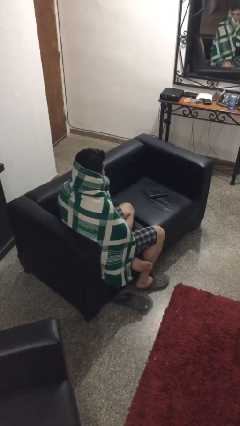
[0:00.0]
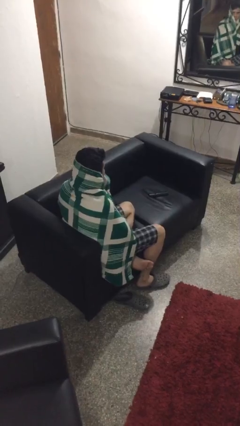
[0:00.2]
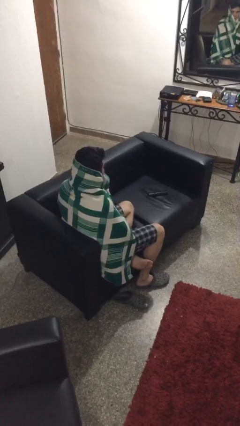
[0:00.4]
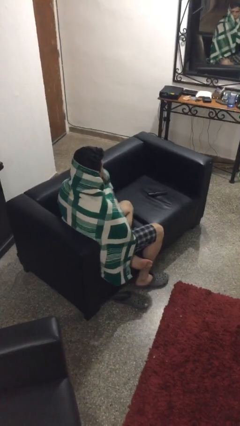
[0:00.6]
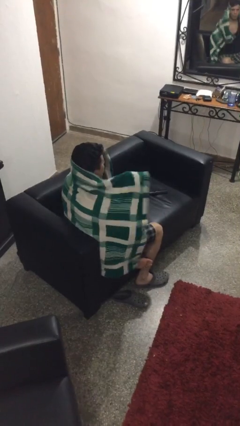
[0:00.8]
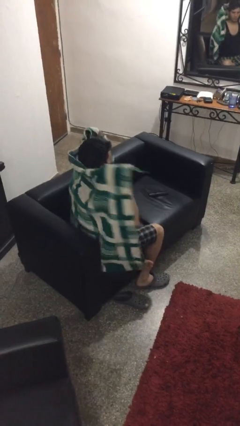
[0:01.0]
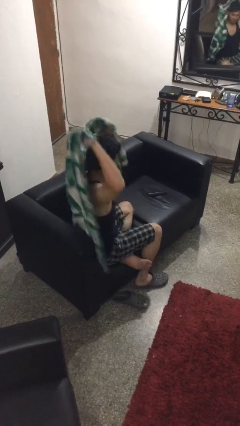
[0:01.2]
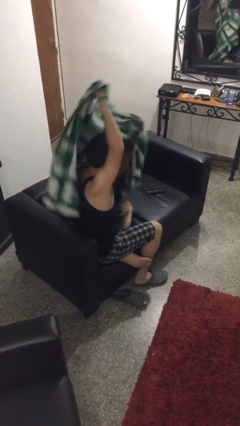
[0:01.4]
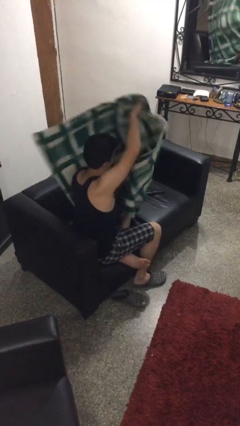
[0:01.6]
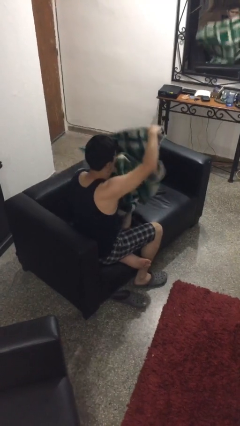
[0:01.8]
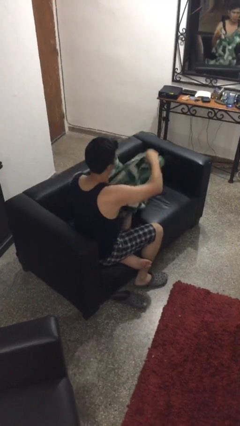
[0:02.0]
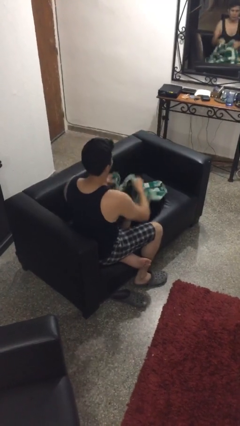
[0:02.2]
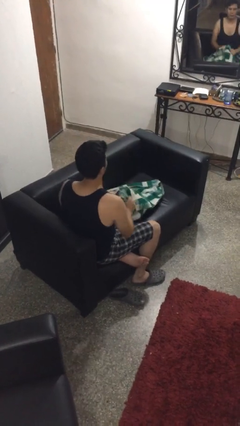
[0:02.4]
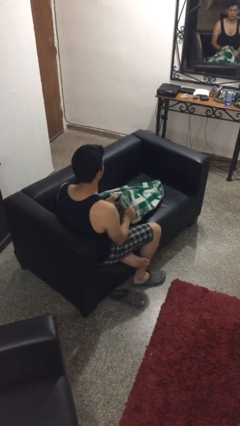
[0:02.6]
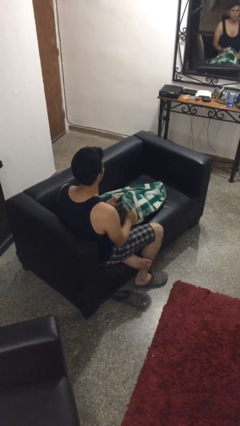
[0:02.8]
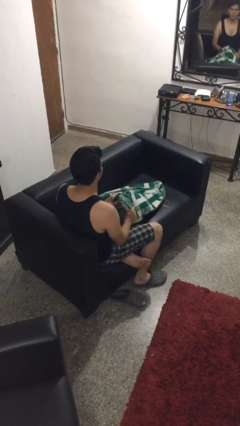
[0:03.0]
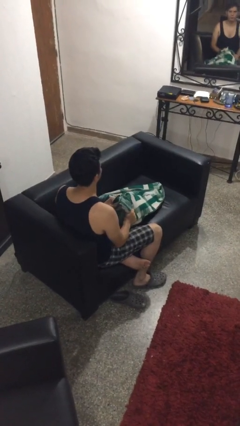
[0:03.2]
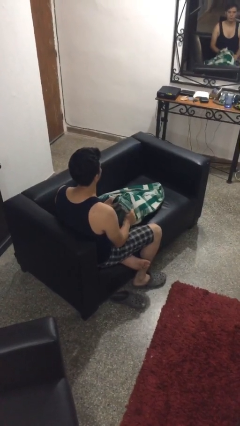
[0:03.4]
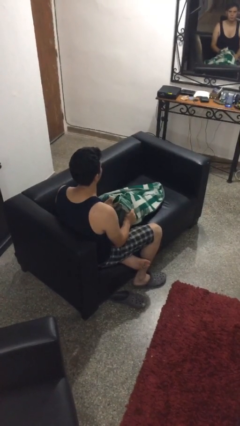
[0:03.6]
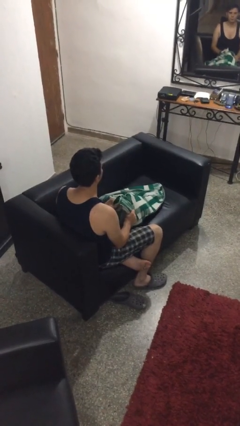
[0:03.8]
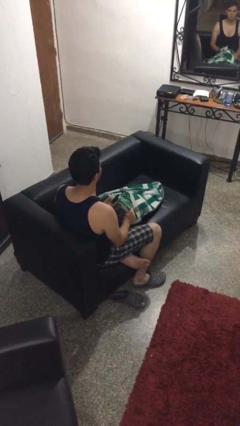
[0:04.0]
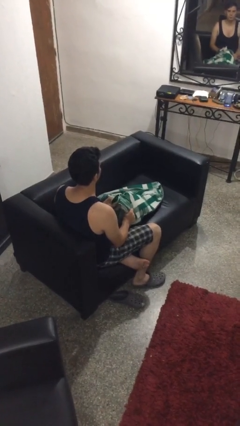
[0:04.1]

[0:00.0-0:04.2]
person uncovers with blanket

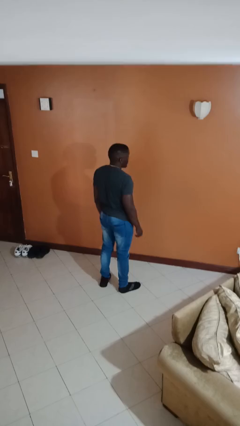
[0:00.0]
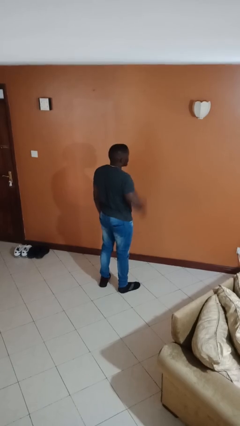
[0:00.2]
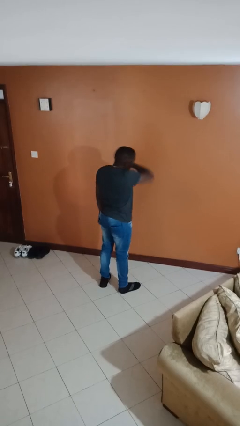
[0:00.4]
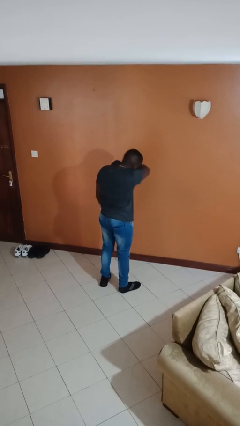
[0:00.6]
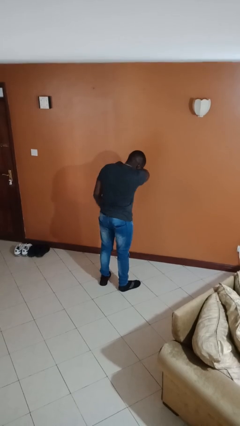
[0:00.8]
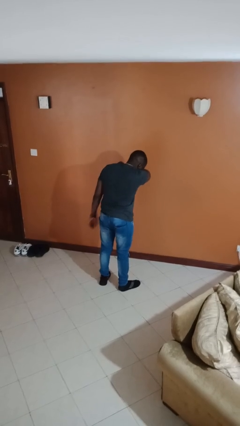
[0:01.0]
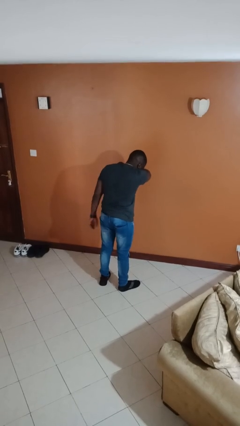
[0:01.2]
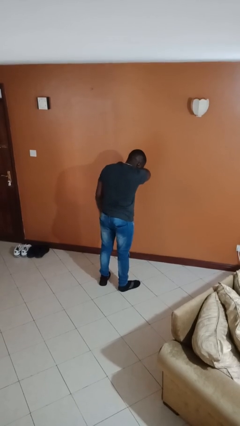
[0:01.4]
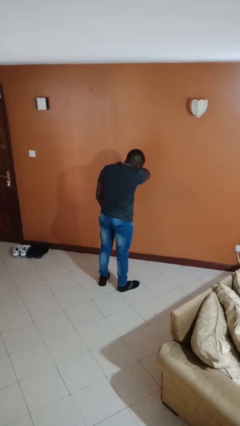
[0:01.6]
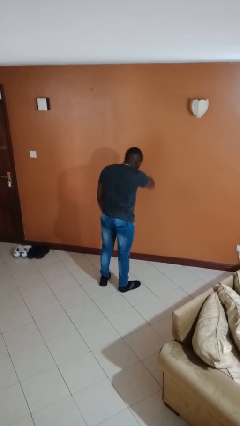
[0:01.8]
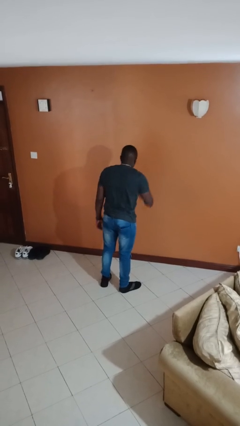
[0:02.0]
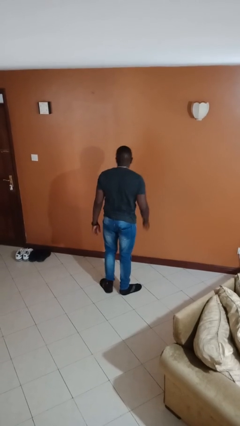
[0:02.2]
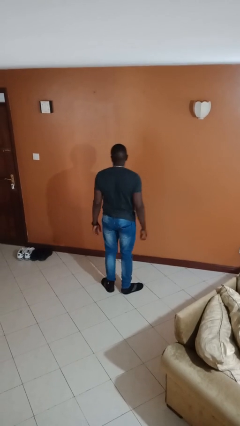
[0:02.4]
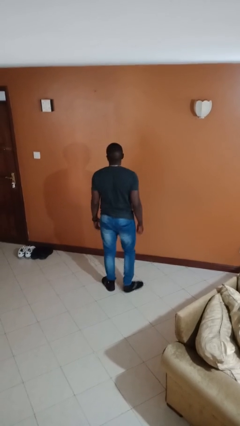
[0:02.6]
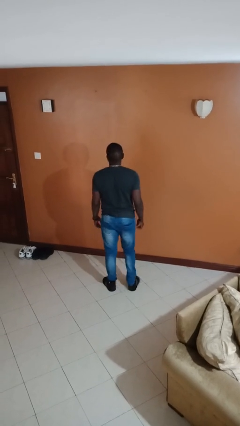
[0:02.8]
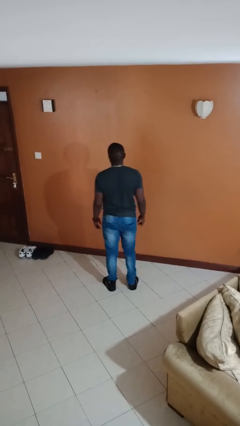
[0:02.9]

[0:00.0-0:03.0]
person sneezes into arm

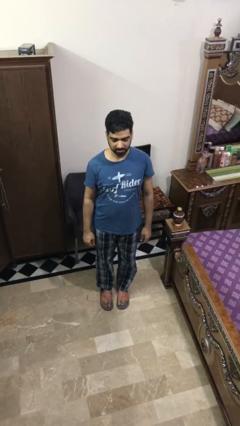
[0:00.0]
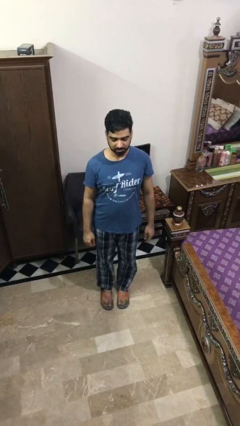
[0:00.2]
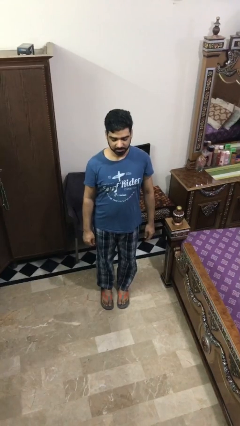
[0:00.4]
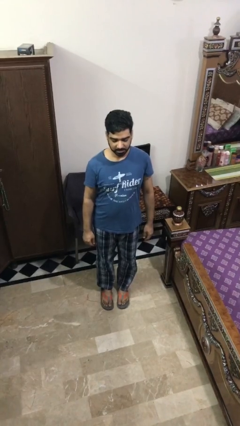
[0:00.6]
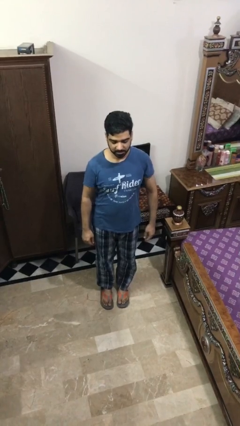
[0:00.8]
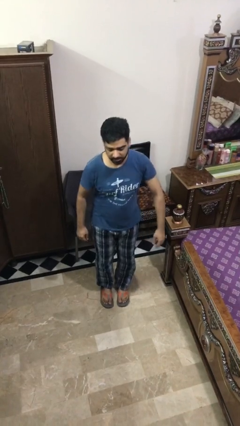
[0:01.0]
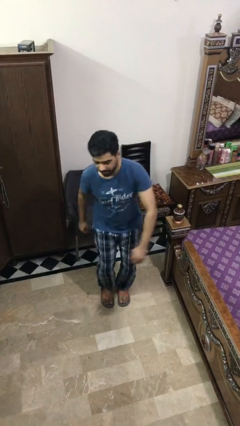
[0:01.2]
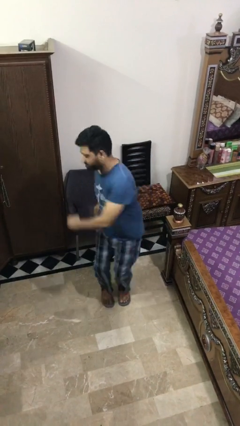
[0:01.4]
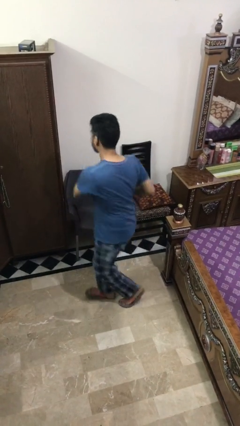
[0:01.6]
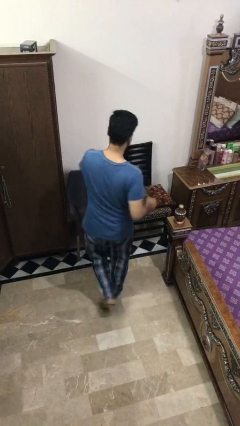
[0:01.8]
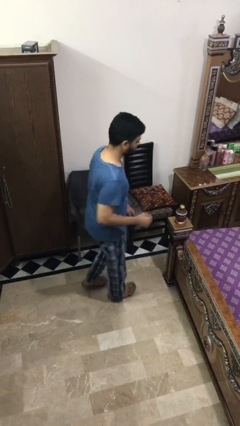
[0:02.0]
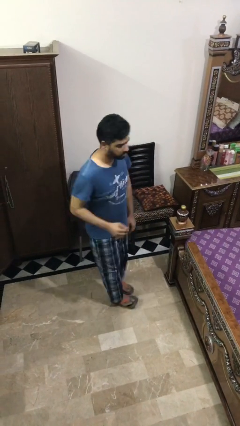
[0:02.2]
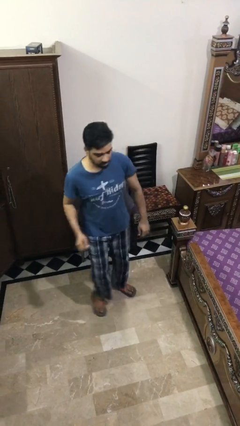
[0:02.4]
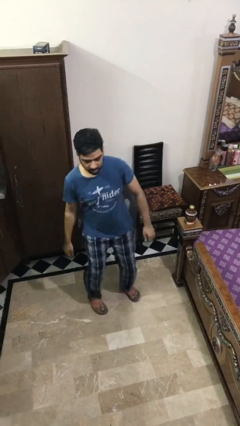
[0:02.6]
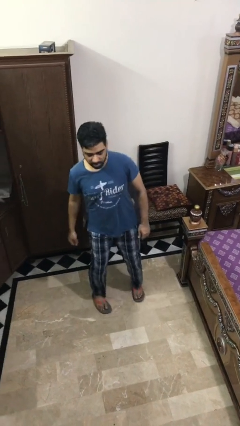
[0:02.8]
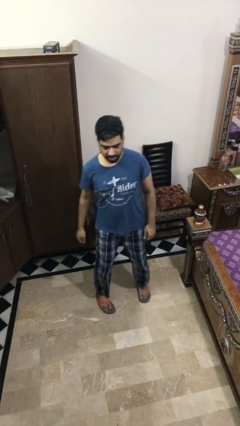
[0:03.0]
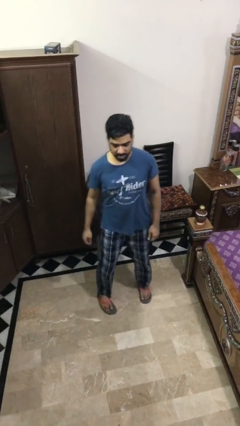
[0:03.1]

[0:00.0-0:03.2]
person twirls

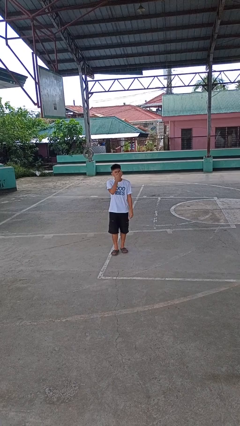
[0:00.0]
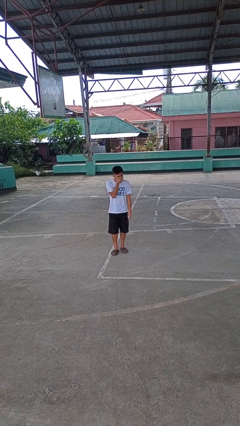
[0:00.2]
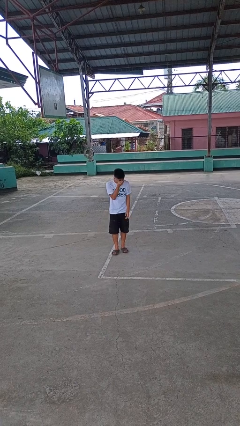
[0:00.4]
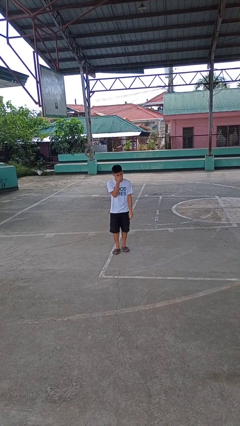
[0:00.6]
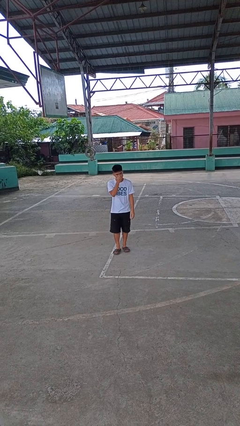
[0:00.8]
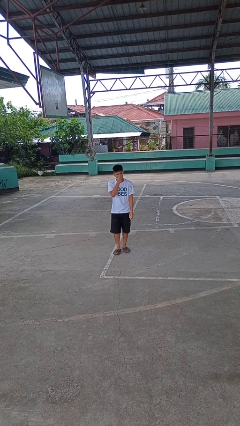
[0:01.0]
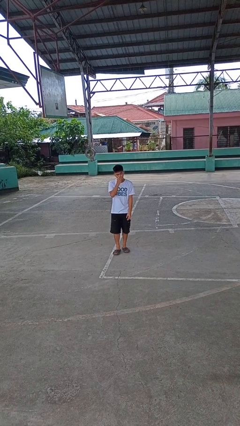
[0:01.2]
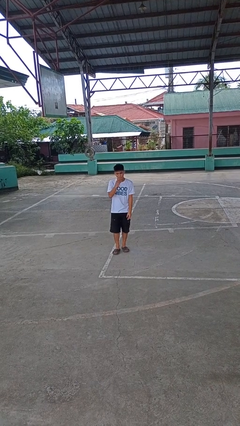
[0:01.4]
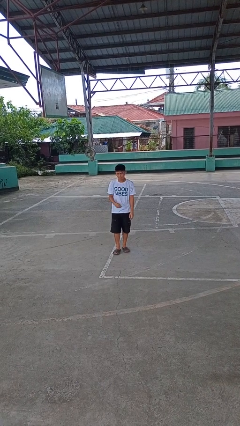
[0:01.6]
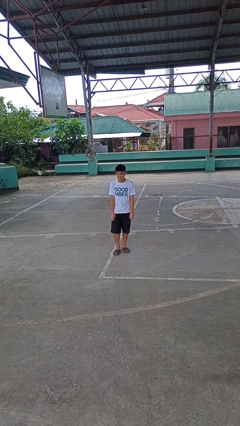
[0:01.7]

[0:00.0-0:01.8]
person sneezes into hand

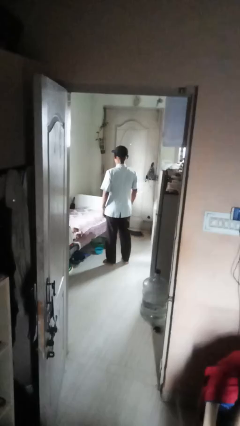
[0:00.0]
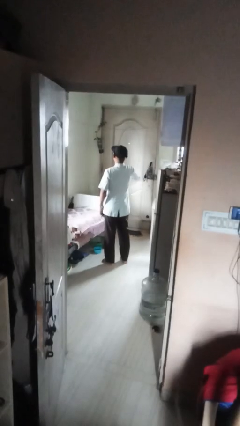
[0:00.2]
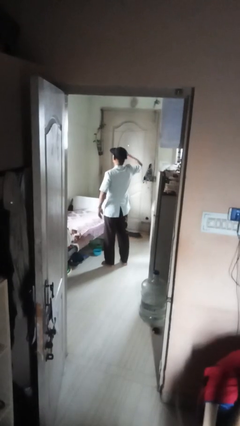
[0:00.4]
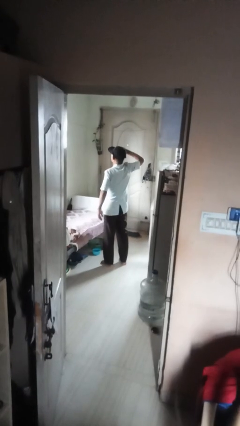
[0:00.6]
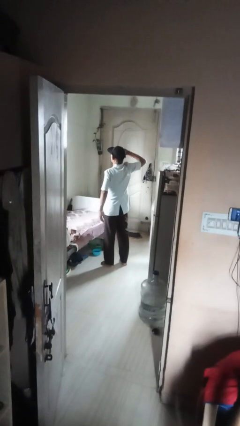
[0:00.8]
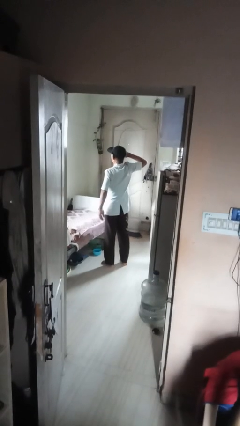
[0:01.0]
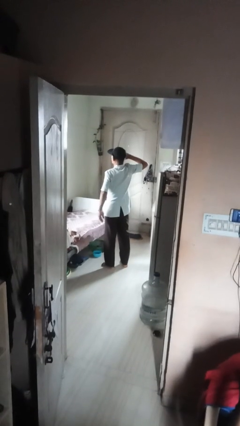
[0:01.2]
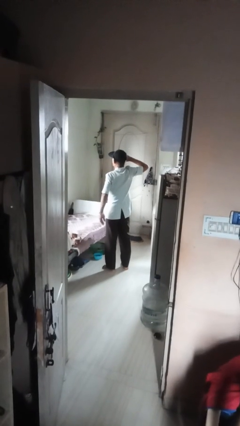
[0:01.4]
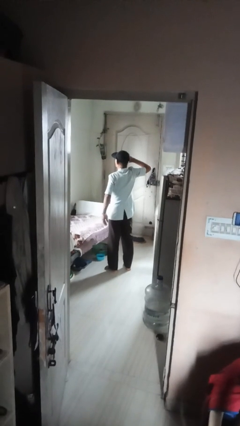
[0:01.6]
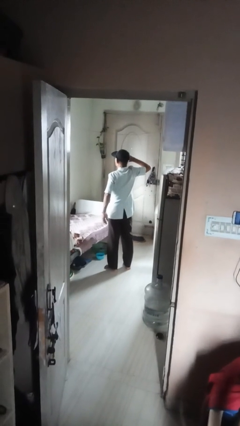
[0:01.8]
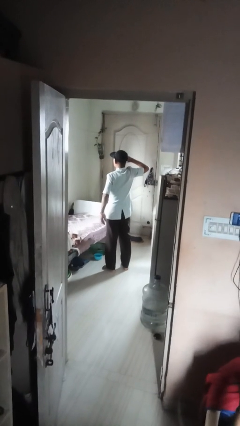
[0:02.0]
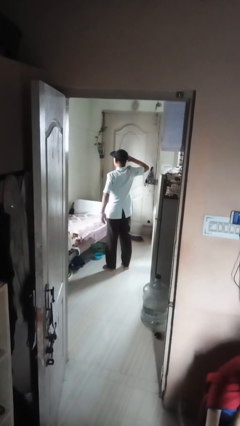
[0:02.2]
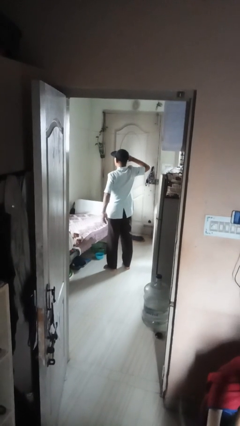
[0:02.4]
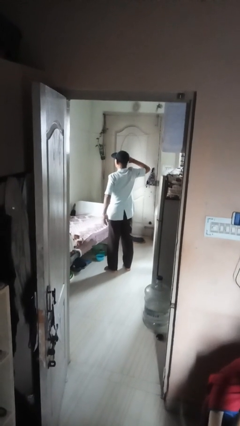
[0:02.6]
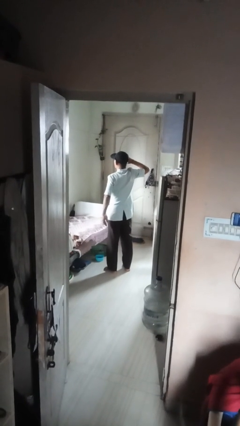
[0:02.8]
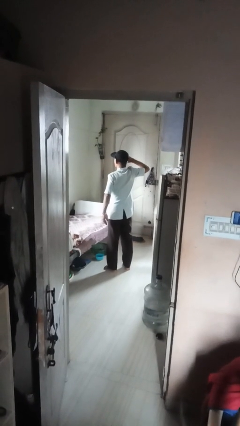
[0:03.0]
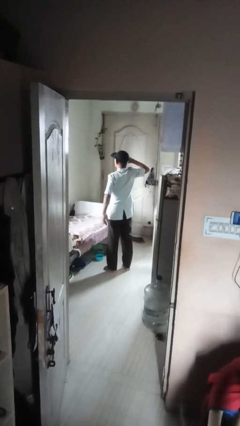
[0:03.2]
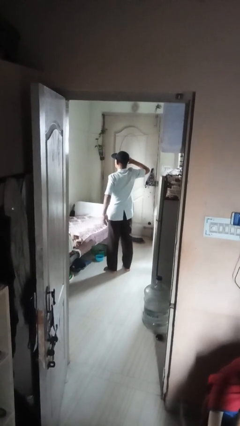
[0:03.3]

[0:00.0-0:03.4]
person salutes

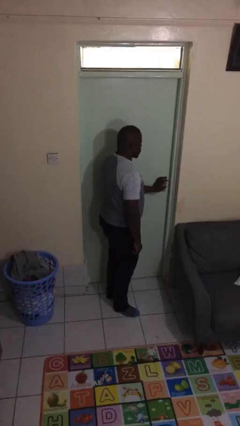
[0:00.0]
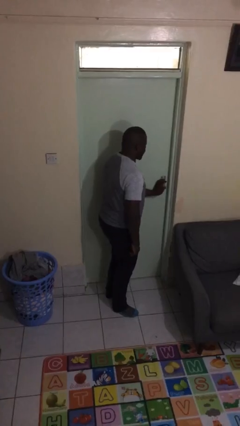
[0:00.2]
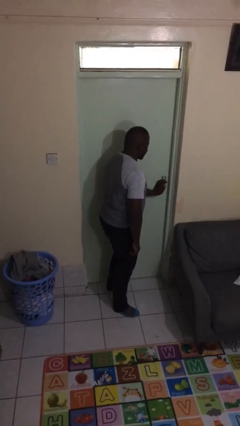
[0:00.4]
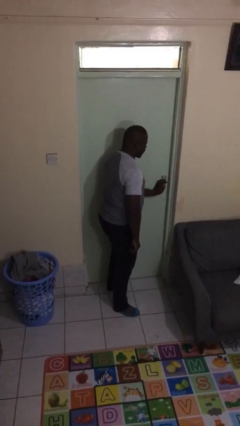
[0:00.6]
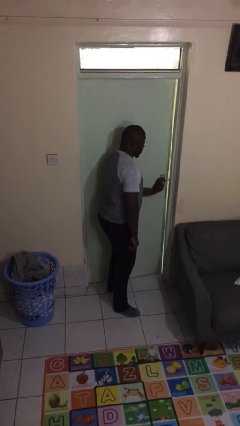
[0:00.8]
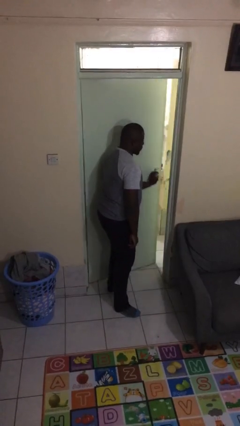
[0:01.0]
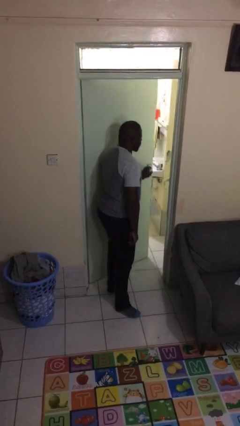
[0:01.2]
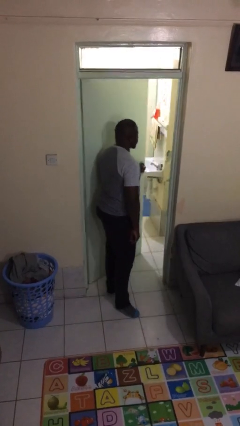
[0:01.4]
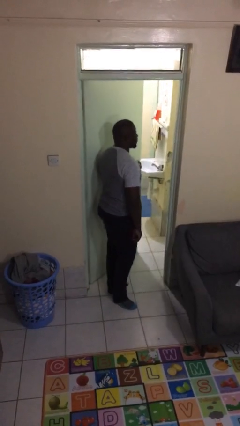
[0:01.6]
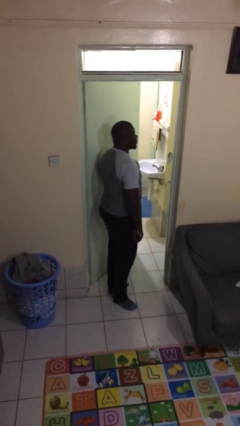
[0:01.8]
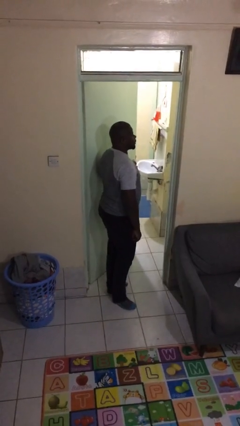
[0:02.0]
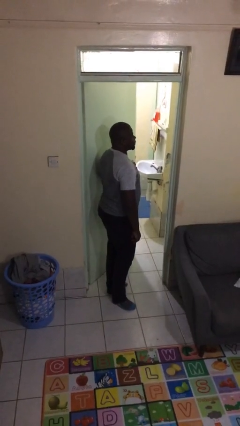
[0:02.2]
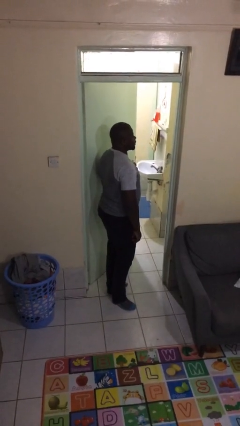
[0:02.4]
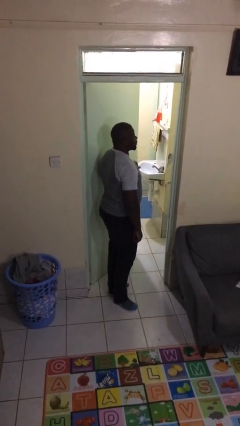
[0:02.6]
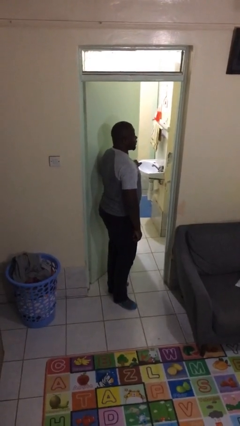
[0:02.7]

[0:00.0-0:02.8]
person opens facility door
